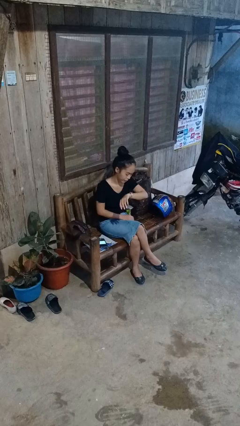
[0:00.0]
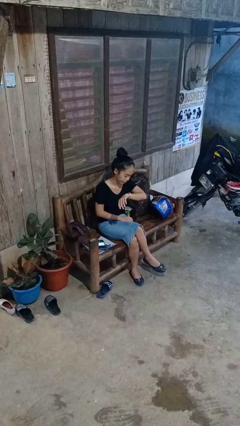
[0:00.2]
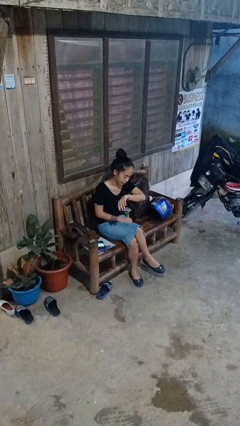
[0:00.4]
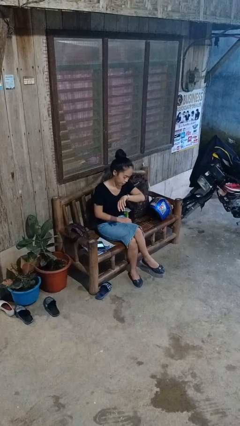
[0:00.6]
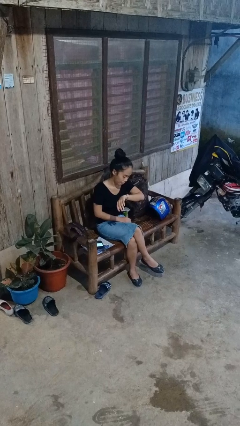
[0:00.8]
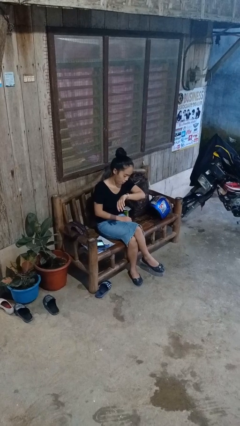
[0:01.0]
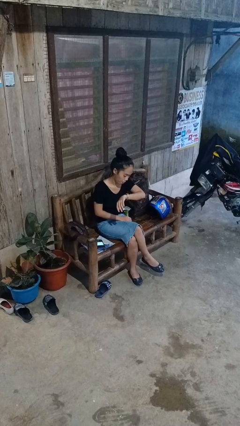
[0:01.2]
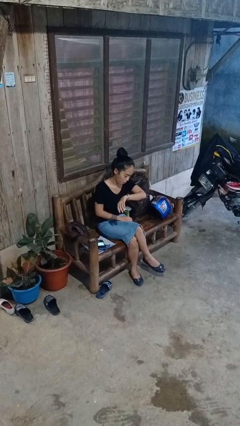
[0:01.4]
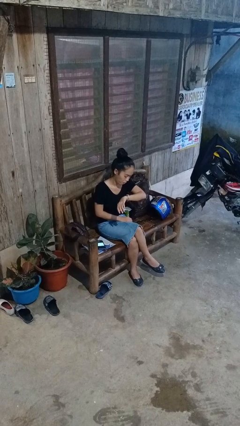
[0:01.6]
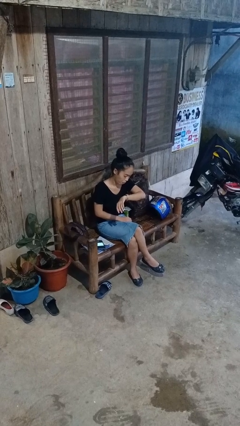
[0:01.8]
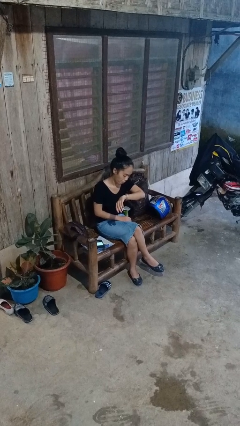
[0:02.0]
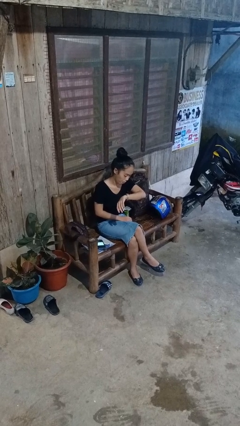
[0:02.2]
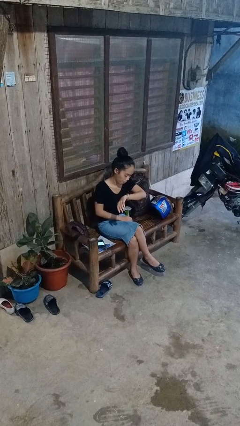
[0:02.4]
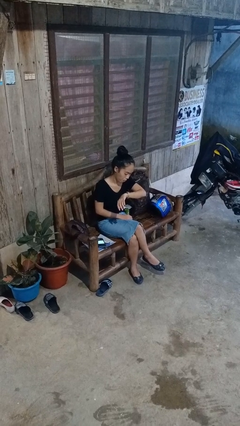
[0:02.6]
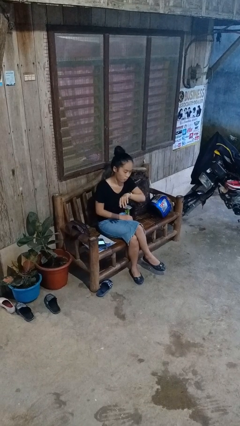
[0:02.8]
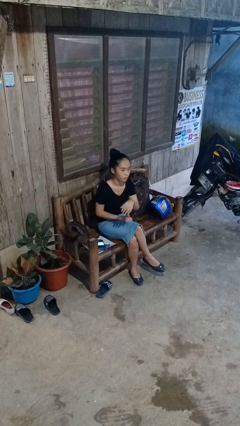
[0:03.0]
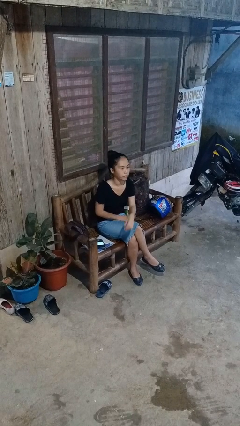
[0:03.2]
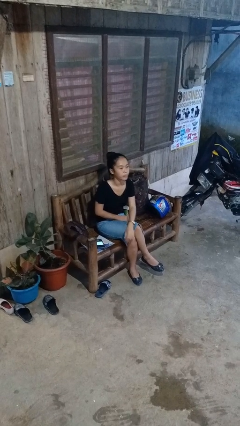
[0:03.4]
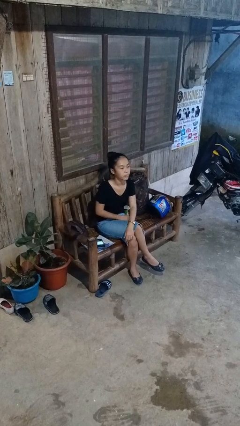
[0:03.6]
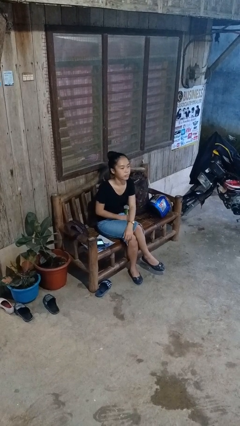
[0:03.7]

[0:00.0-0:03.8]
person looks at wristwatch

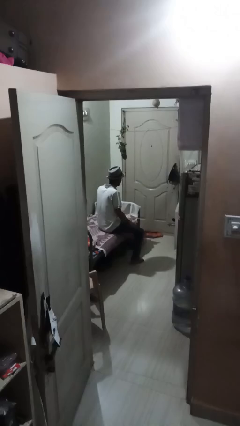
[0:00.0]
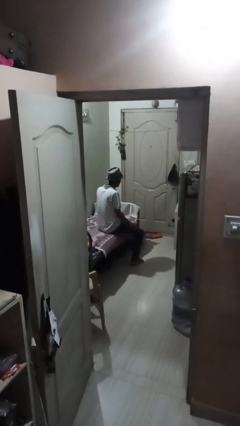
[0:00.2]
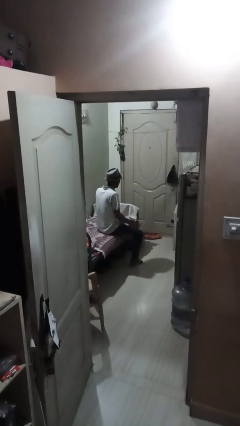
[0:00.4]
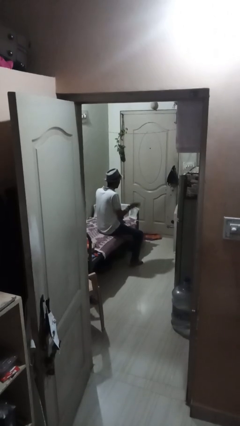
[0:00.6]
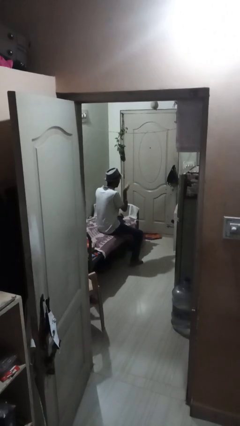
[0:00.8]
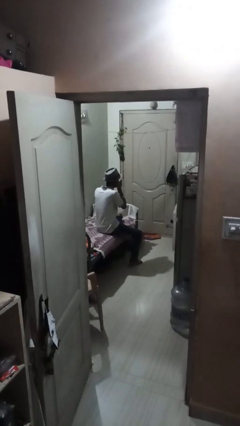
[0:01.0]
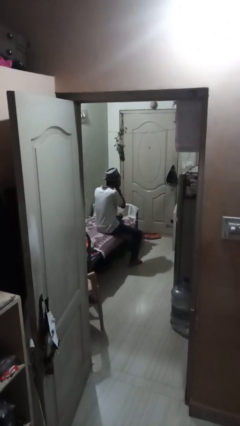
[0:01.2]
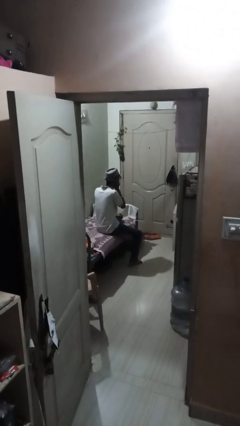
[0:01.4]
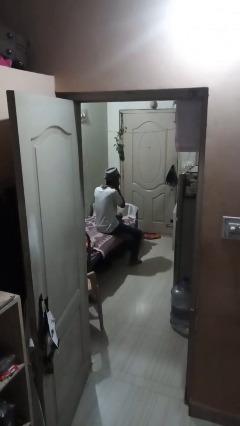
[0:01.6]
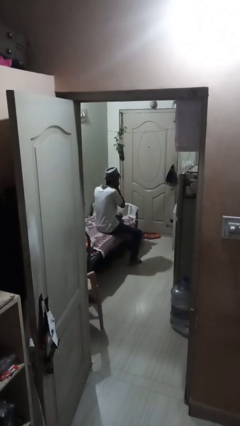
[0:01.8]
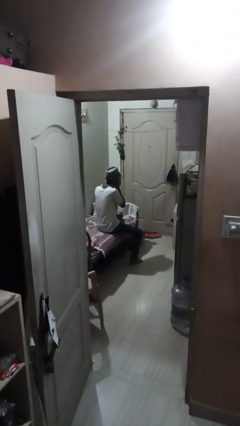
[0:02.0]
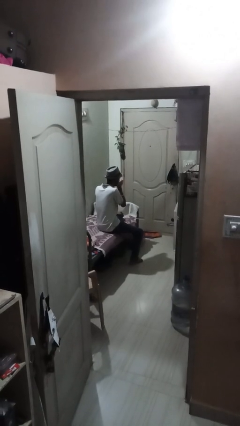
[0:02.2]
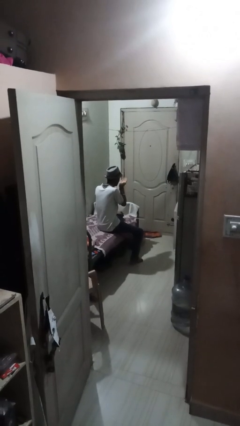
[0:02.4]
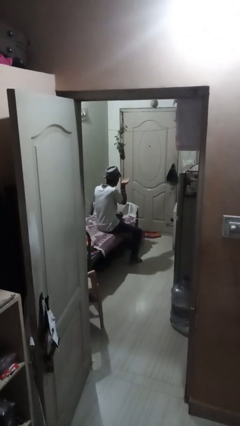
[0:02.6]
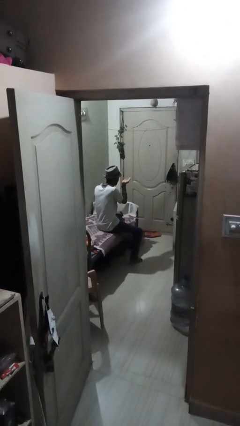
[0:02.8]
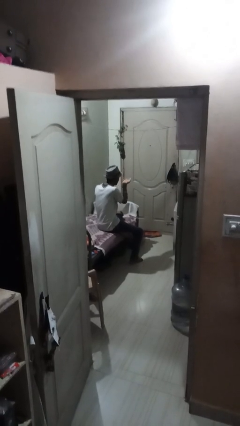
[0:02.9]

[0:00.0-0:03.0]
person gestures blow kiss

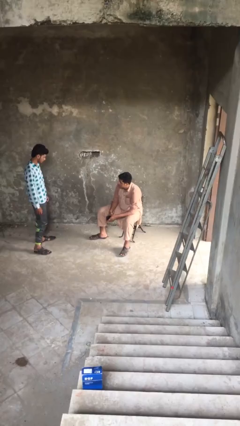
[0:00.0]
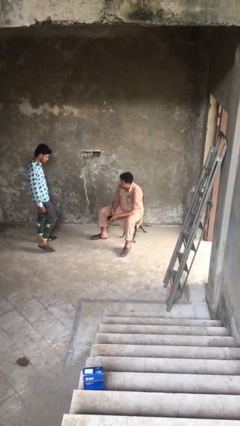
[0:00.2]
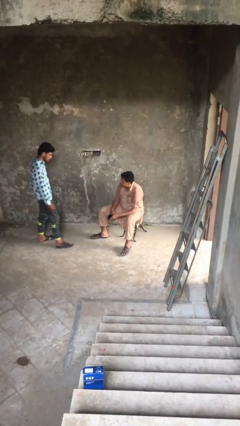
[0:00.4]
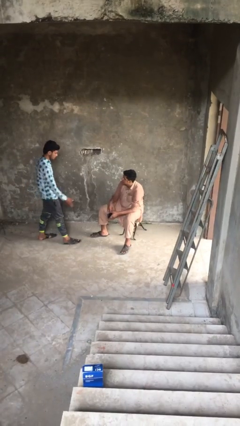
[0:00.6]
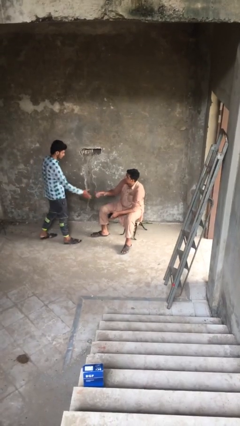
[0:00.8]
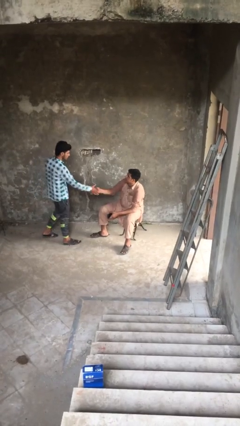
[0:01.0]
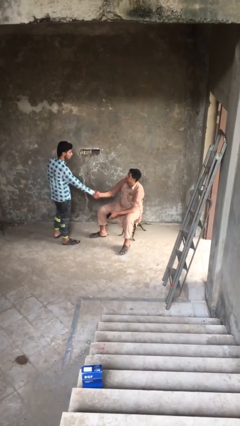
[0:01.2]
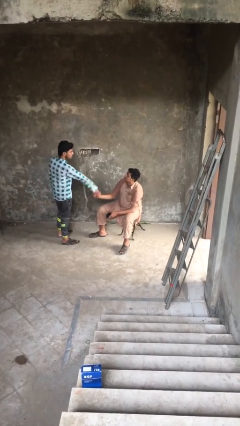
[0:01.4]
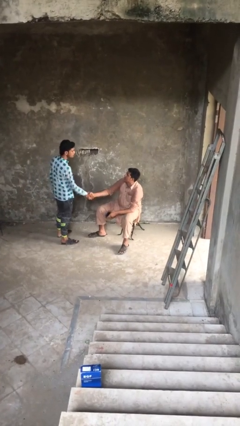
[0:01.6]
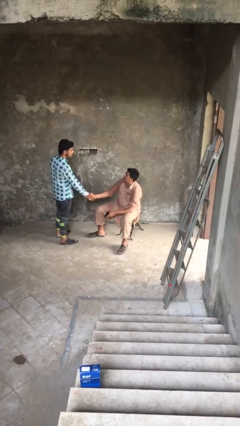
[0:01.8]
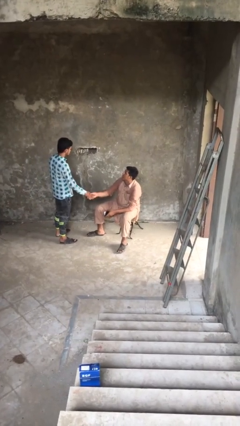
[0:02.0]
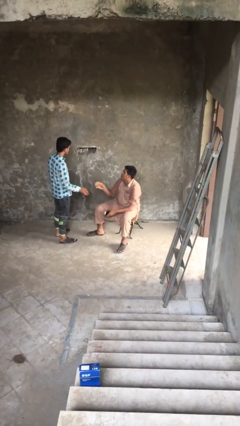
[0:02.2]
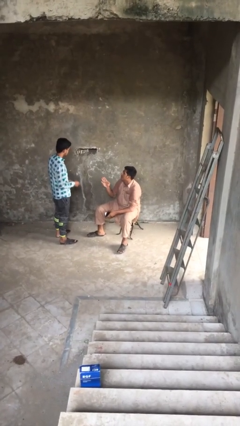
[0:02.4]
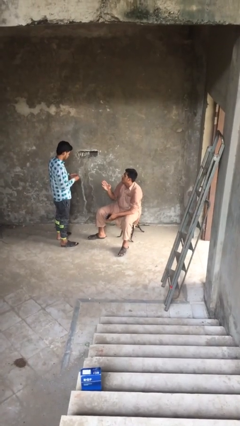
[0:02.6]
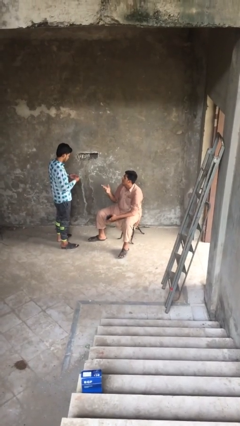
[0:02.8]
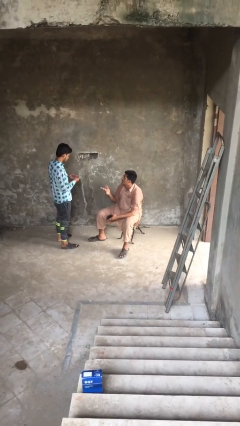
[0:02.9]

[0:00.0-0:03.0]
person shakes hand

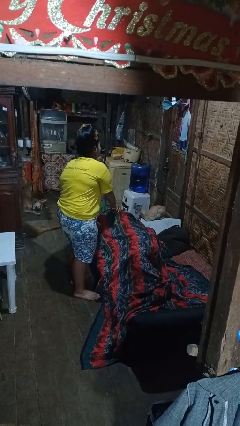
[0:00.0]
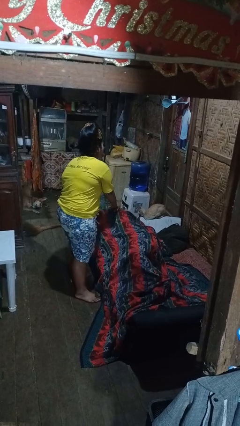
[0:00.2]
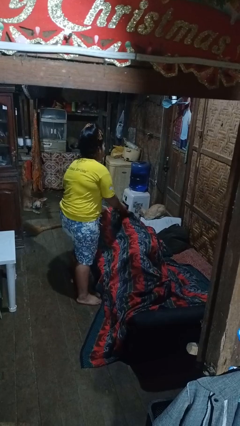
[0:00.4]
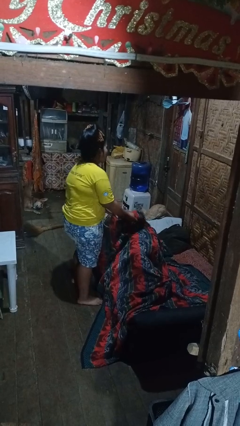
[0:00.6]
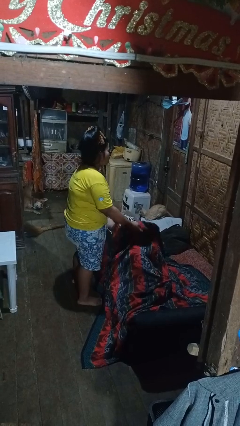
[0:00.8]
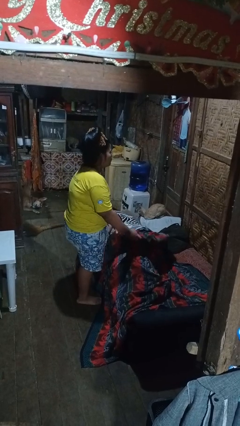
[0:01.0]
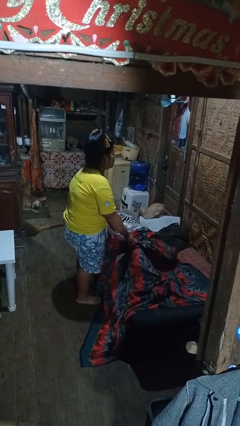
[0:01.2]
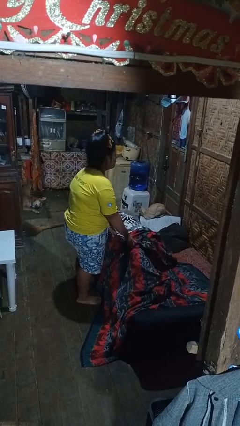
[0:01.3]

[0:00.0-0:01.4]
person uncovers friend with blanket

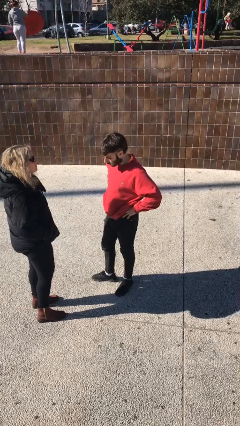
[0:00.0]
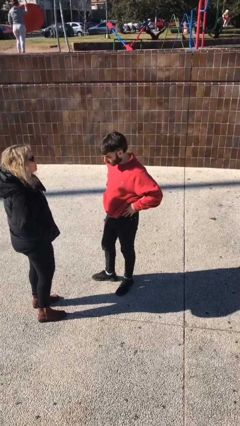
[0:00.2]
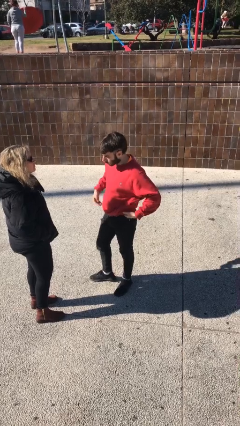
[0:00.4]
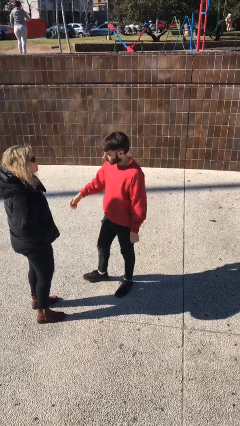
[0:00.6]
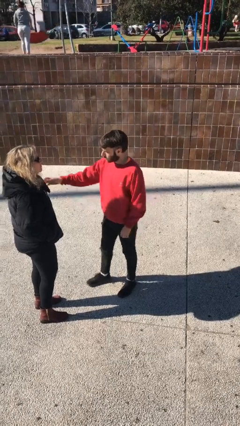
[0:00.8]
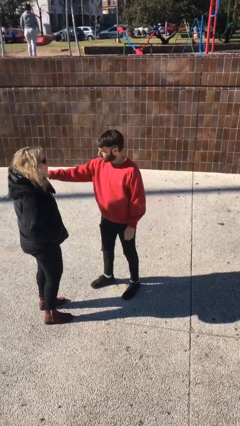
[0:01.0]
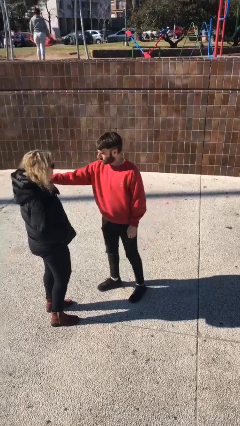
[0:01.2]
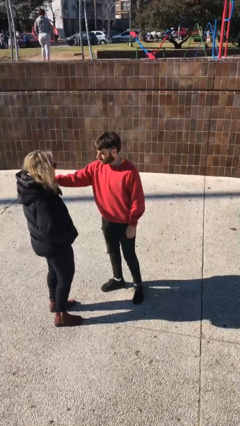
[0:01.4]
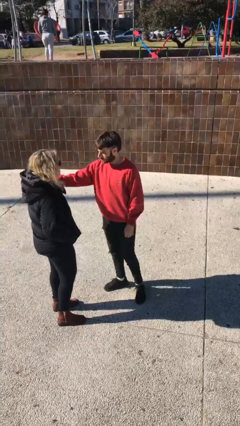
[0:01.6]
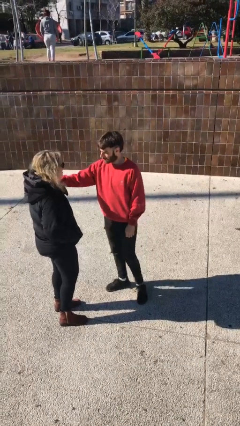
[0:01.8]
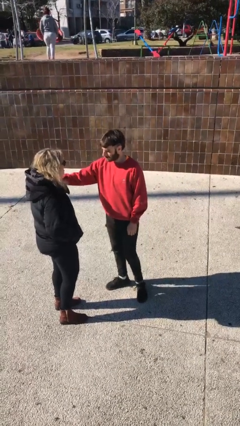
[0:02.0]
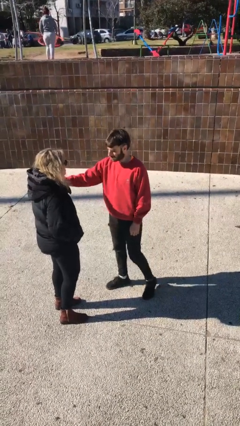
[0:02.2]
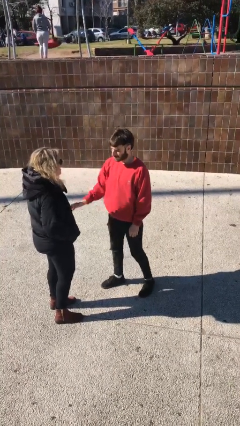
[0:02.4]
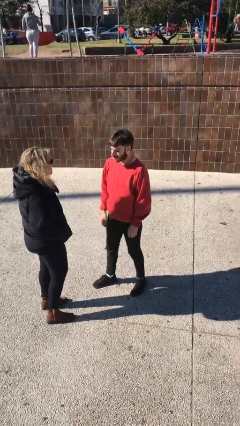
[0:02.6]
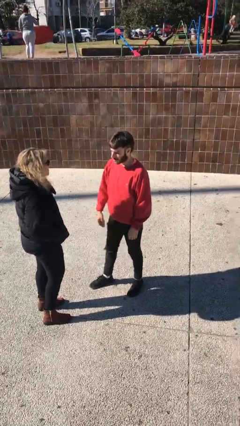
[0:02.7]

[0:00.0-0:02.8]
person pounds shoulders of person

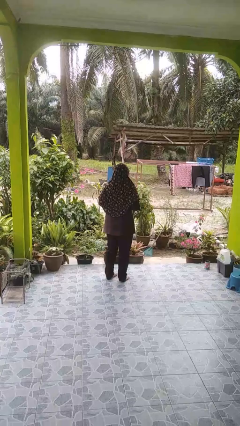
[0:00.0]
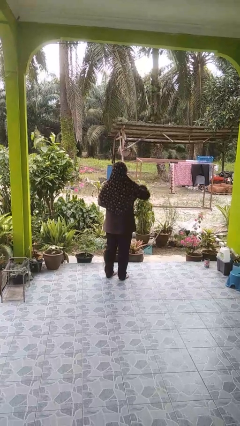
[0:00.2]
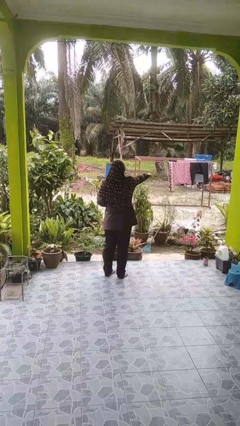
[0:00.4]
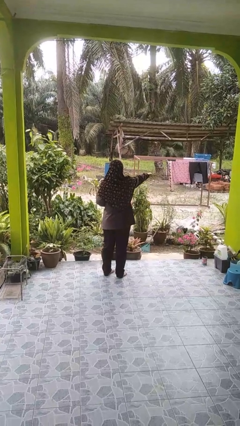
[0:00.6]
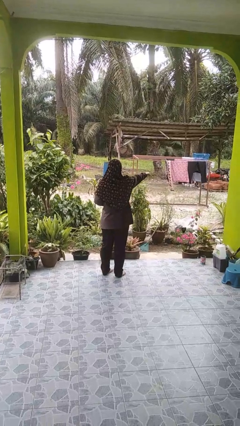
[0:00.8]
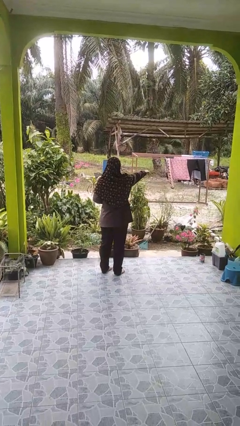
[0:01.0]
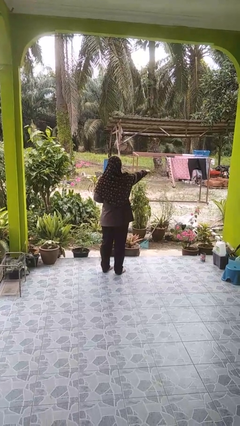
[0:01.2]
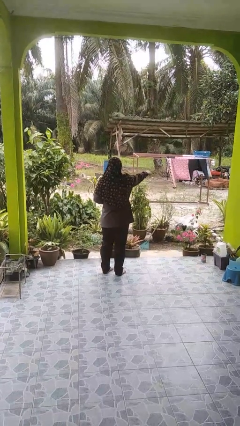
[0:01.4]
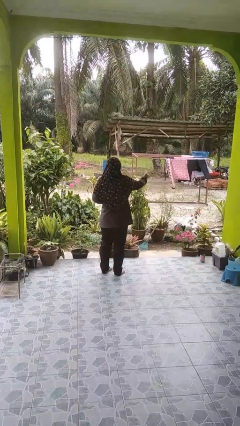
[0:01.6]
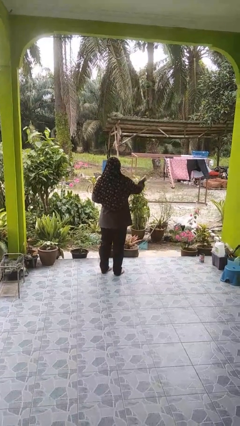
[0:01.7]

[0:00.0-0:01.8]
person punches

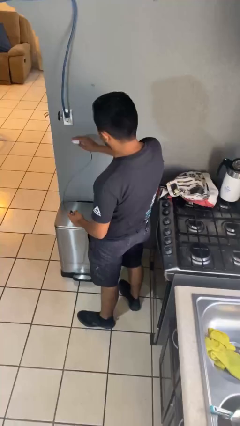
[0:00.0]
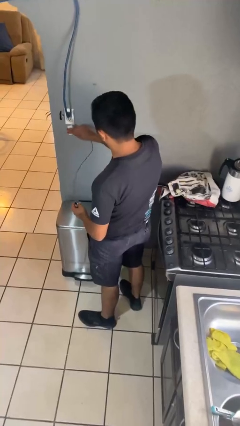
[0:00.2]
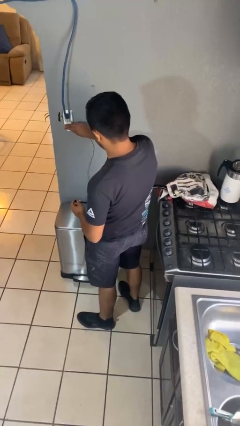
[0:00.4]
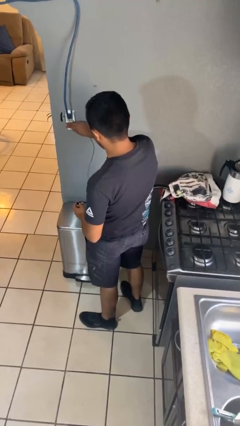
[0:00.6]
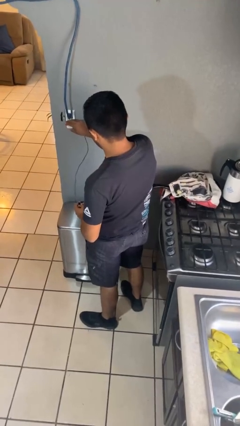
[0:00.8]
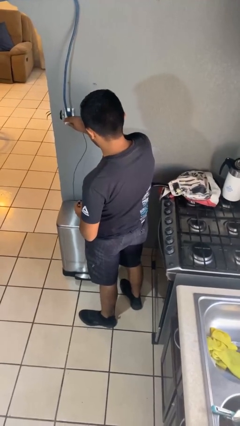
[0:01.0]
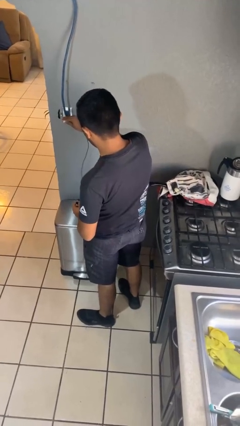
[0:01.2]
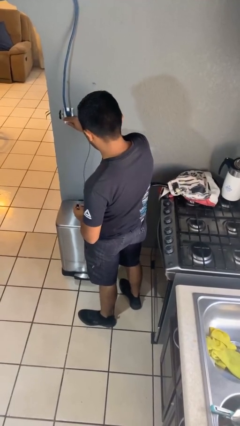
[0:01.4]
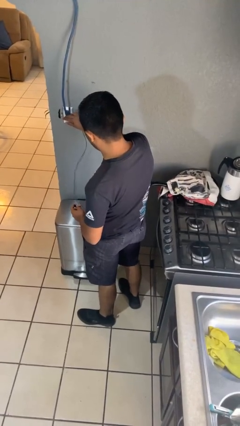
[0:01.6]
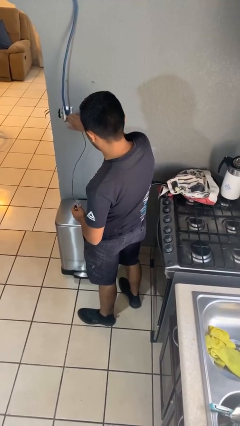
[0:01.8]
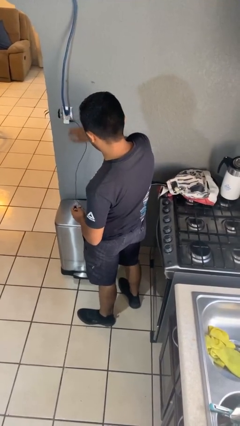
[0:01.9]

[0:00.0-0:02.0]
person plugs into electrical socket
